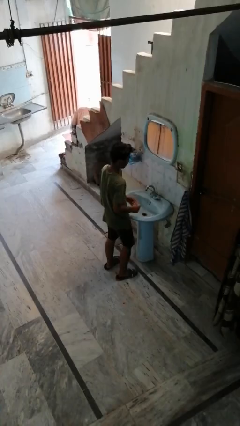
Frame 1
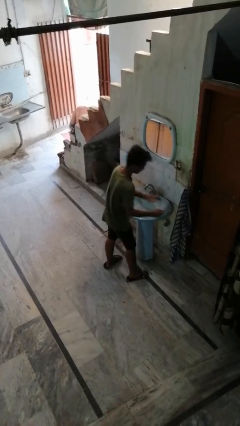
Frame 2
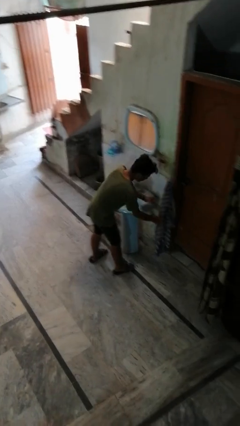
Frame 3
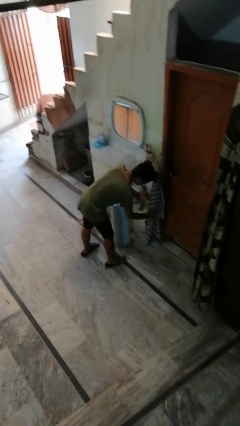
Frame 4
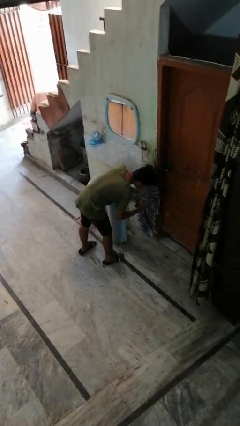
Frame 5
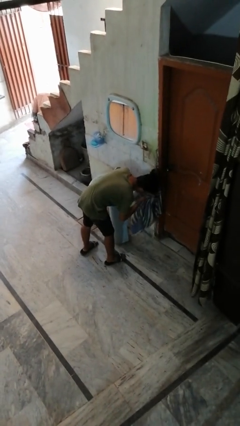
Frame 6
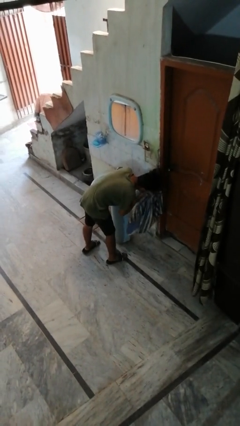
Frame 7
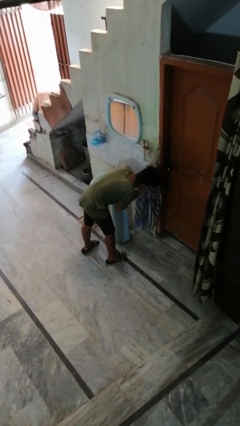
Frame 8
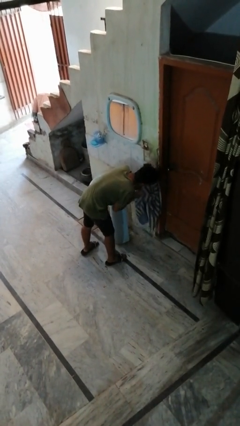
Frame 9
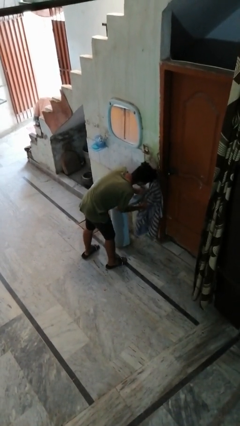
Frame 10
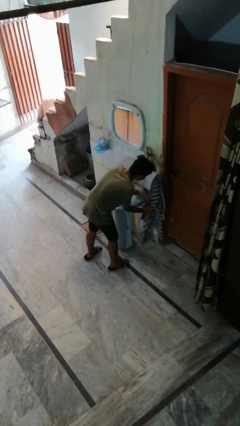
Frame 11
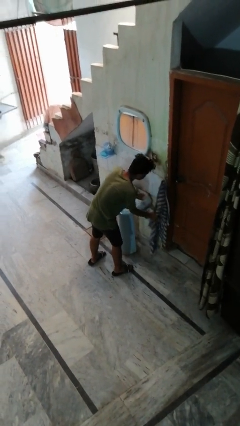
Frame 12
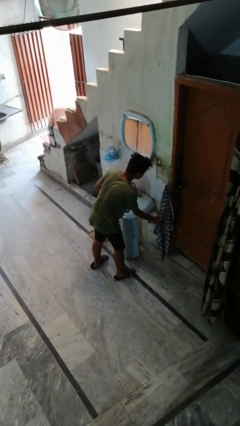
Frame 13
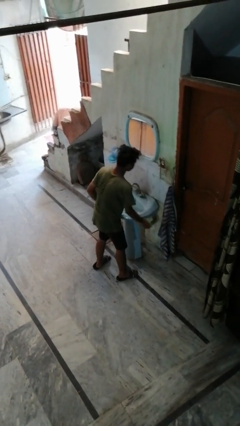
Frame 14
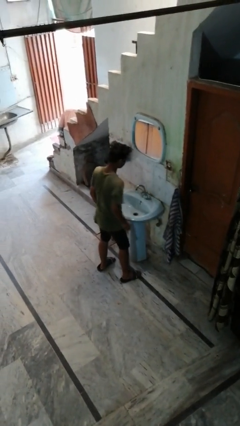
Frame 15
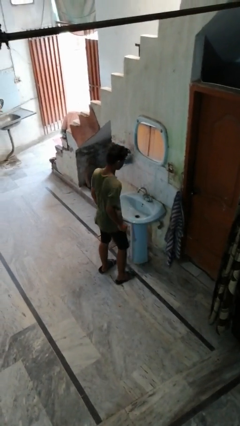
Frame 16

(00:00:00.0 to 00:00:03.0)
person dries face with towel

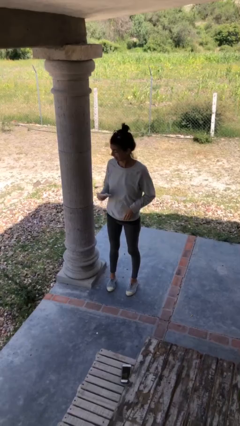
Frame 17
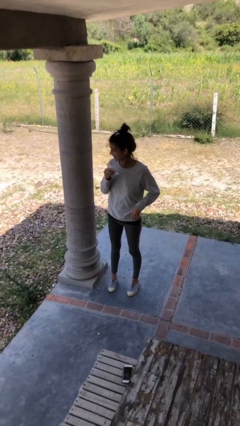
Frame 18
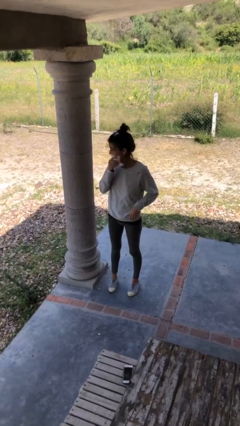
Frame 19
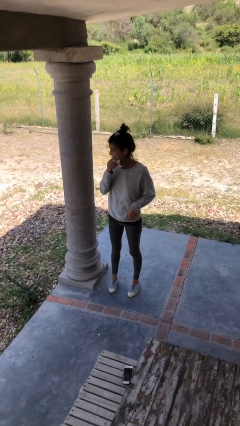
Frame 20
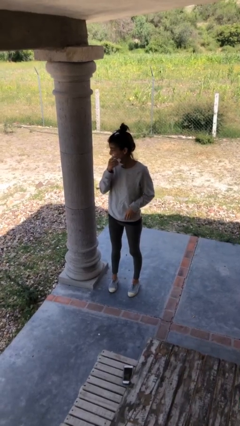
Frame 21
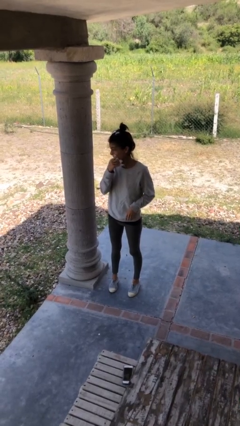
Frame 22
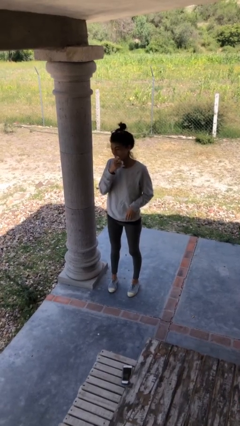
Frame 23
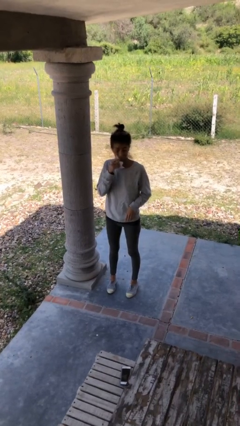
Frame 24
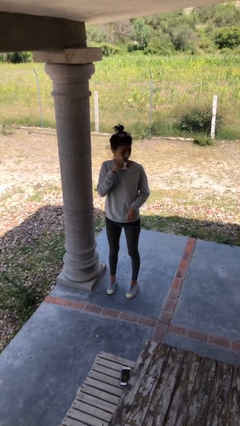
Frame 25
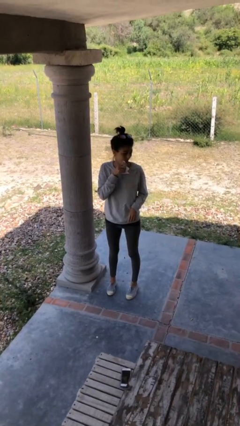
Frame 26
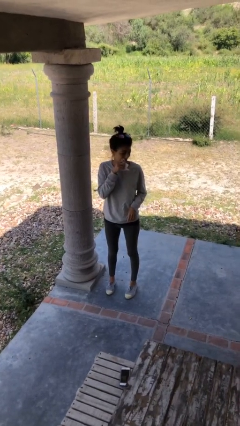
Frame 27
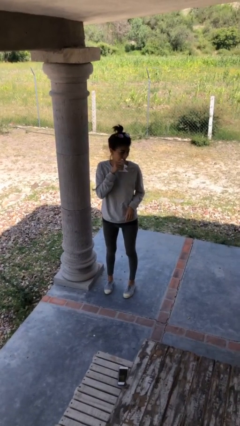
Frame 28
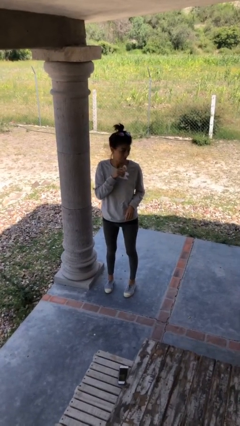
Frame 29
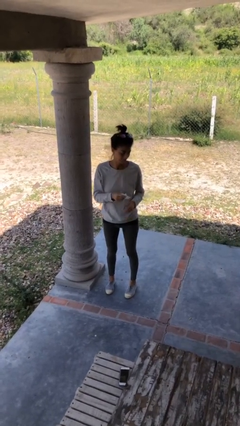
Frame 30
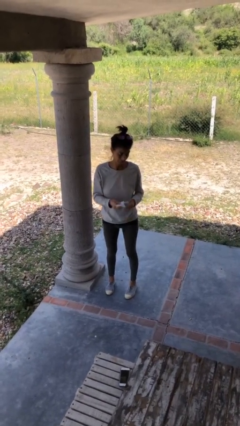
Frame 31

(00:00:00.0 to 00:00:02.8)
person wipes mouth with napkin

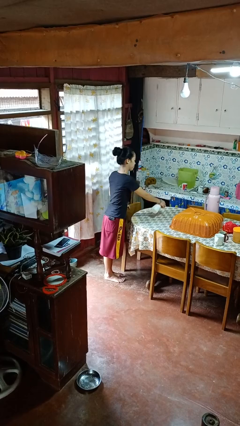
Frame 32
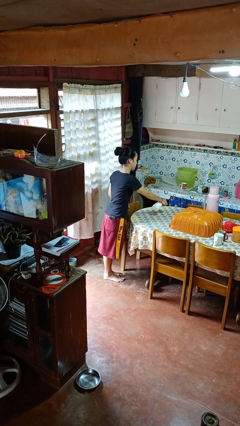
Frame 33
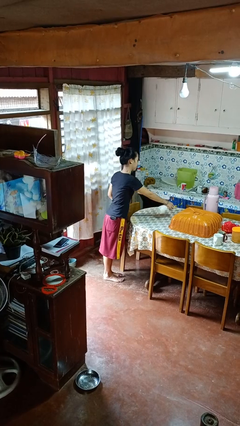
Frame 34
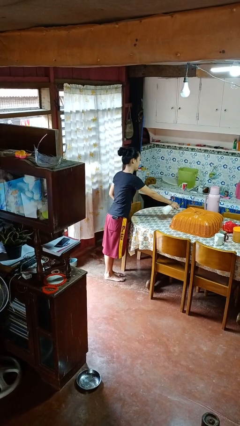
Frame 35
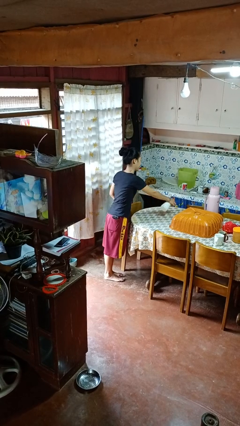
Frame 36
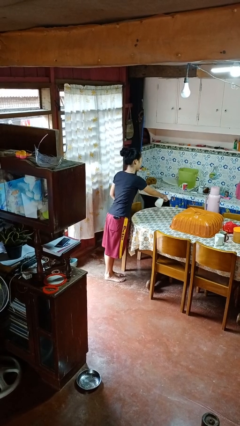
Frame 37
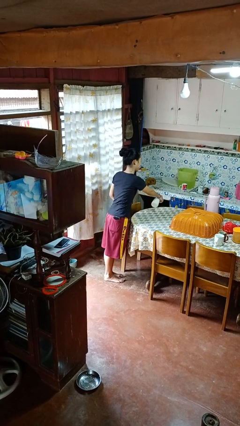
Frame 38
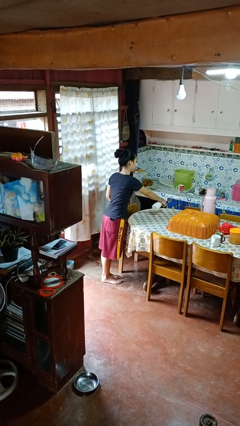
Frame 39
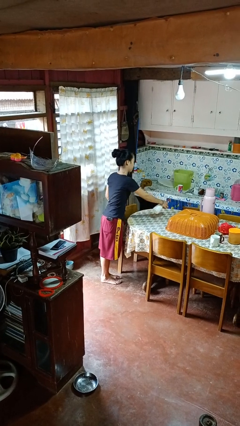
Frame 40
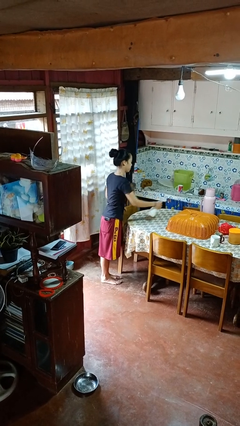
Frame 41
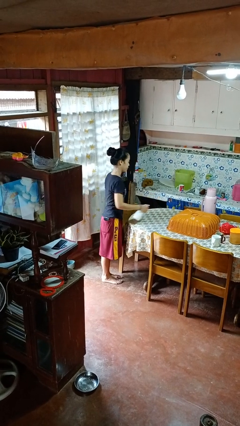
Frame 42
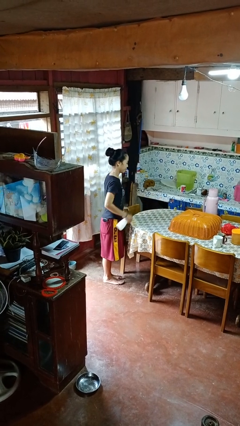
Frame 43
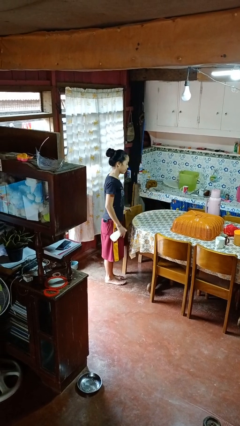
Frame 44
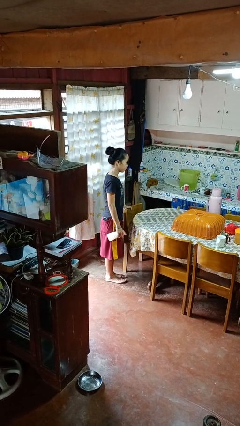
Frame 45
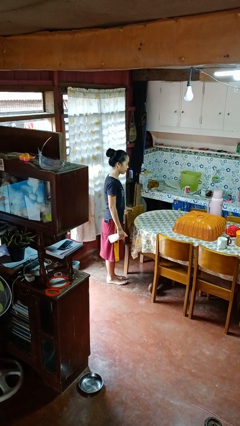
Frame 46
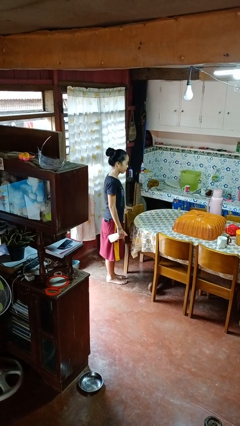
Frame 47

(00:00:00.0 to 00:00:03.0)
person sprays from bottle

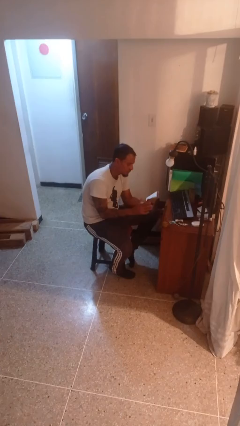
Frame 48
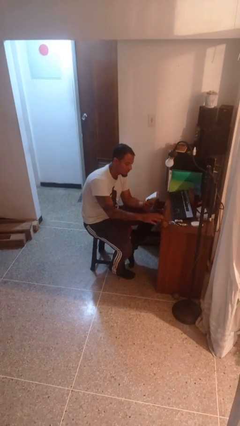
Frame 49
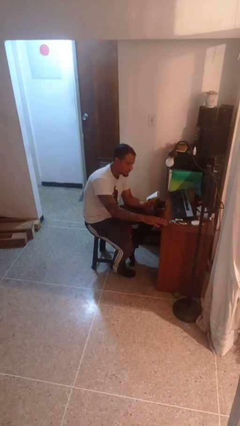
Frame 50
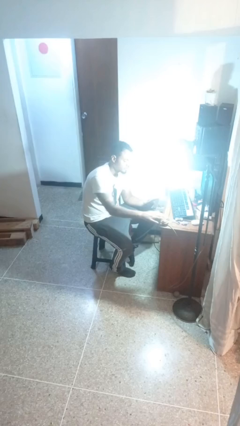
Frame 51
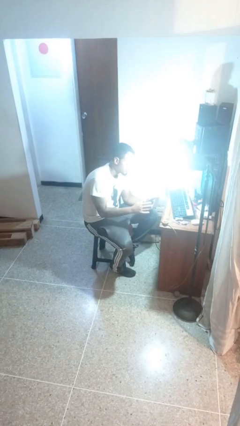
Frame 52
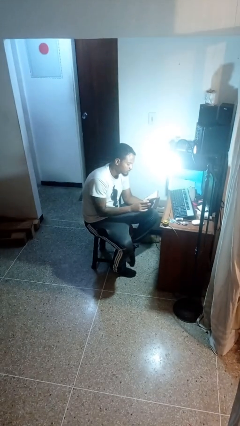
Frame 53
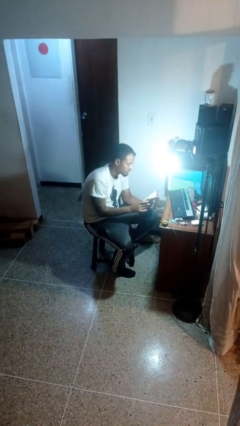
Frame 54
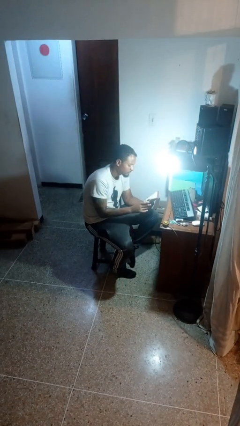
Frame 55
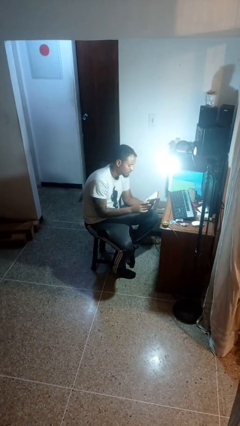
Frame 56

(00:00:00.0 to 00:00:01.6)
person turns on lamp

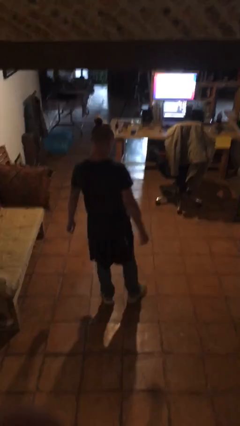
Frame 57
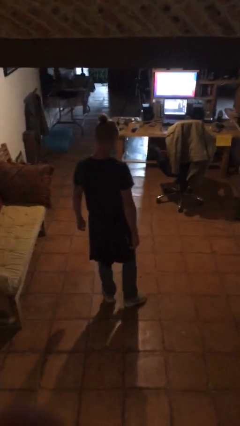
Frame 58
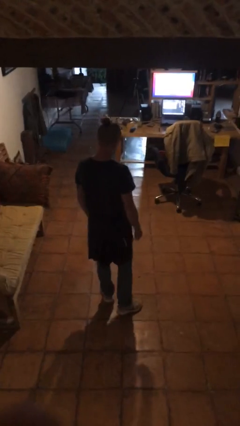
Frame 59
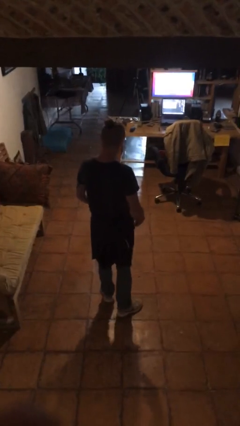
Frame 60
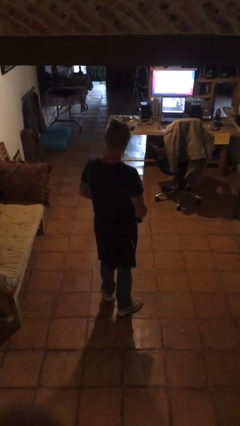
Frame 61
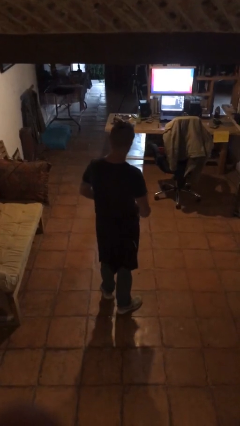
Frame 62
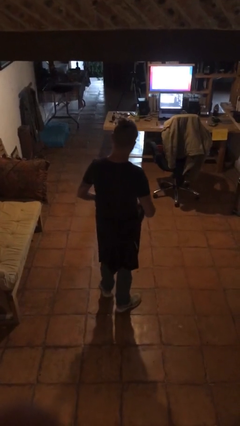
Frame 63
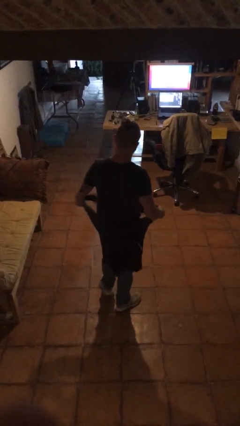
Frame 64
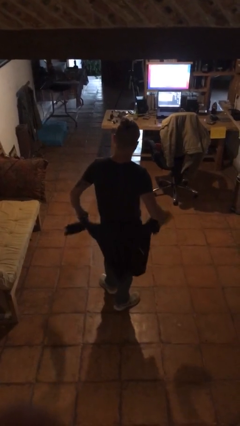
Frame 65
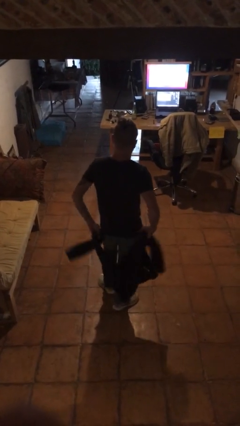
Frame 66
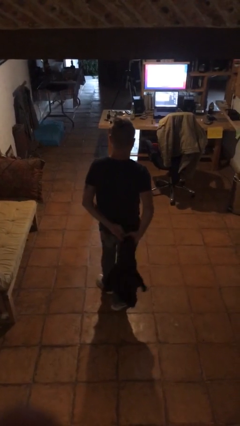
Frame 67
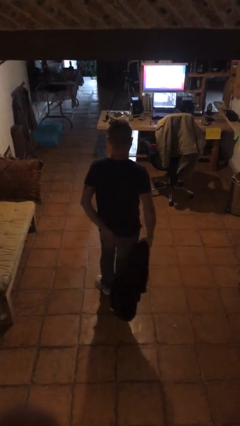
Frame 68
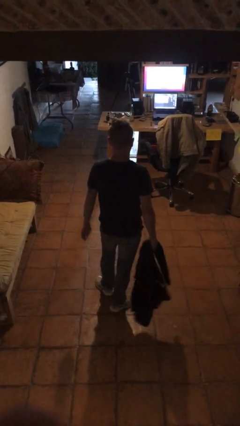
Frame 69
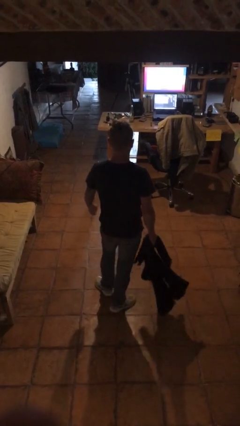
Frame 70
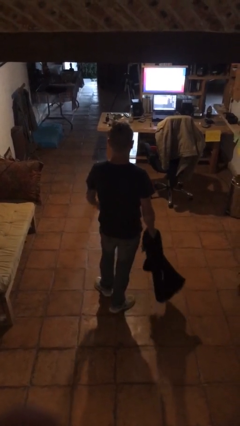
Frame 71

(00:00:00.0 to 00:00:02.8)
person unties jacket around waist

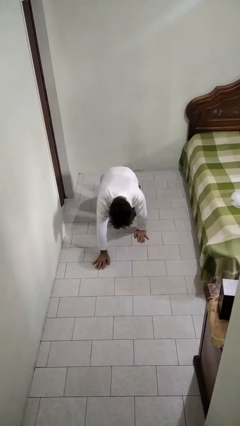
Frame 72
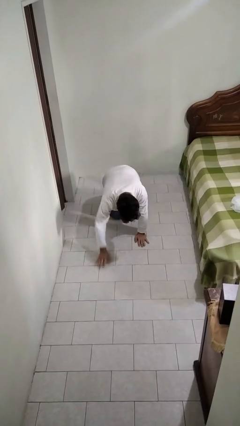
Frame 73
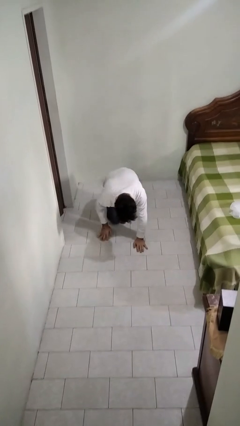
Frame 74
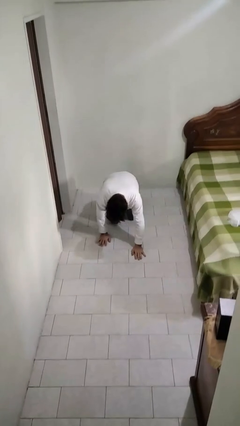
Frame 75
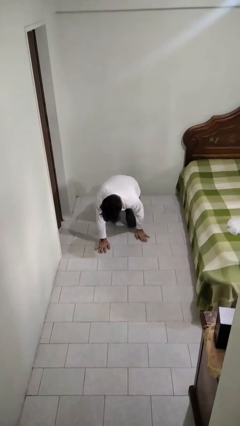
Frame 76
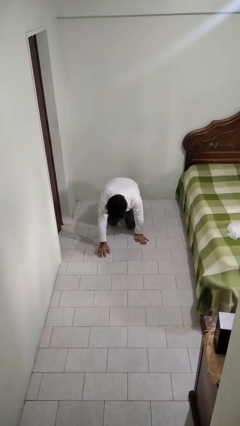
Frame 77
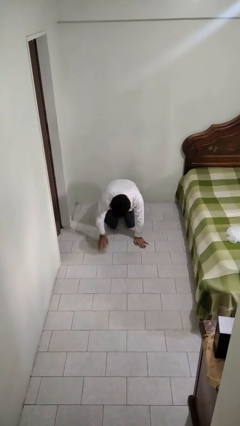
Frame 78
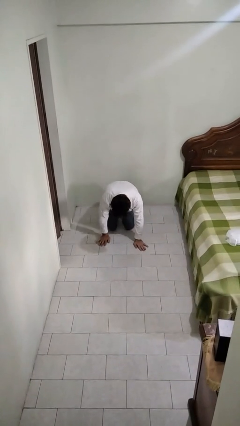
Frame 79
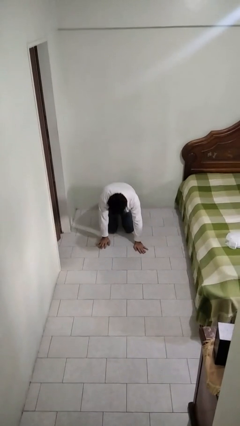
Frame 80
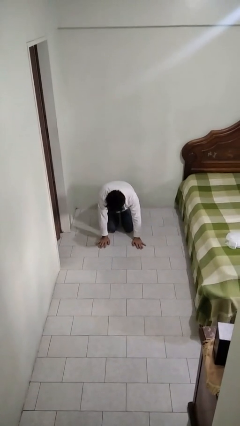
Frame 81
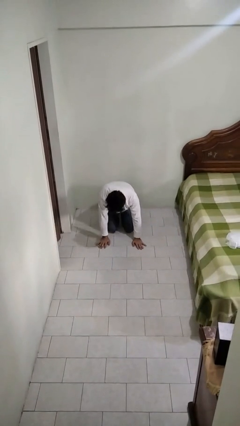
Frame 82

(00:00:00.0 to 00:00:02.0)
person crawls

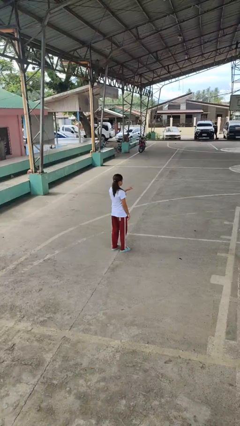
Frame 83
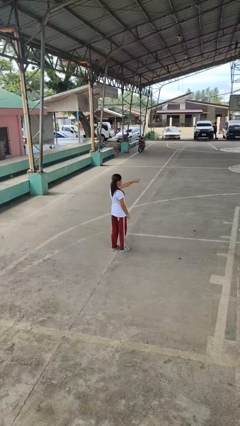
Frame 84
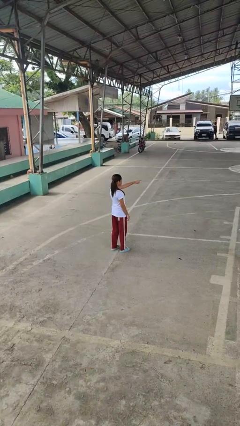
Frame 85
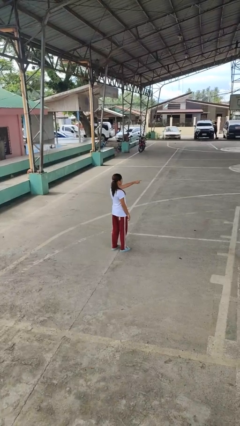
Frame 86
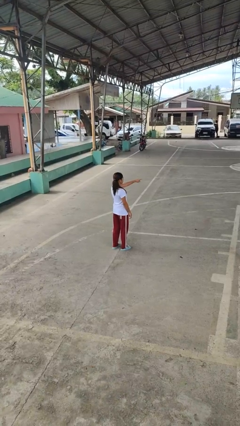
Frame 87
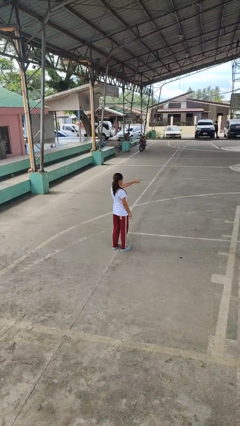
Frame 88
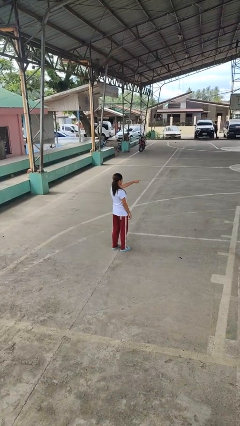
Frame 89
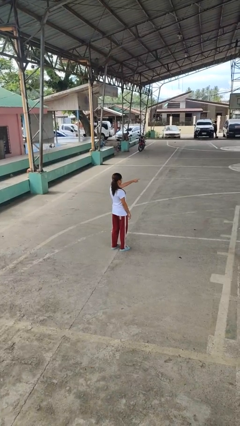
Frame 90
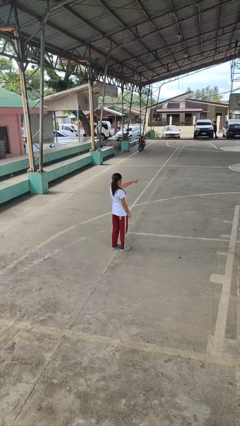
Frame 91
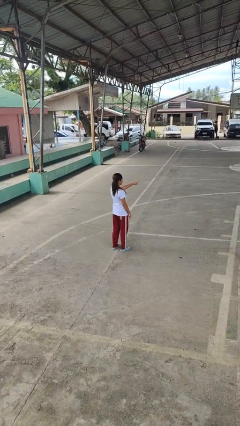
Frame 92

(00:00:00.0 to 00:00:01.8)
person points at person
